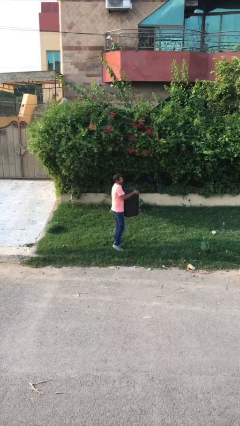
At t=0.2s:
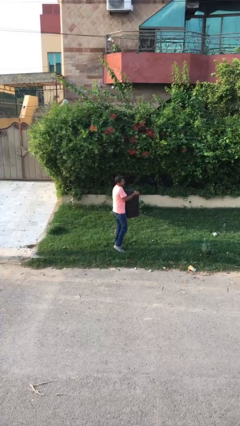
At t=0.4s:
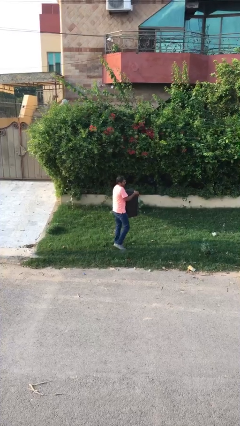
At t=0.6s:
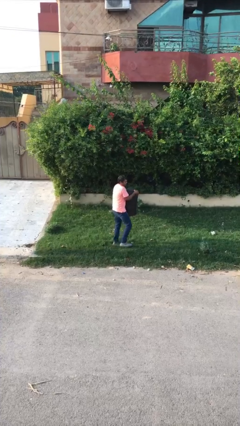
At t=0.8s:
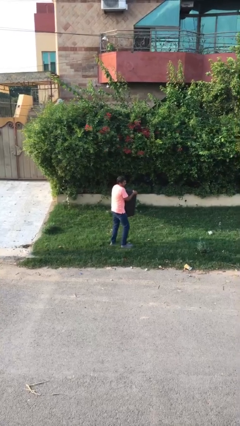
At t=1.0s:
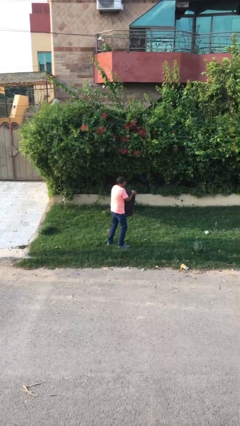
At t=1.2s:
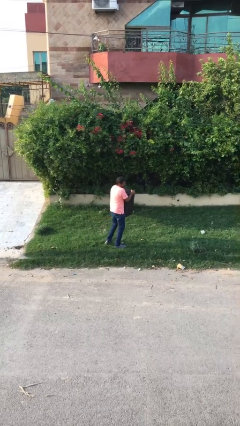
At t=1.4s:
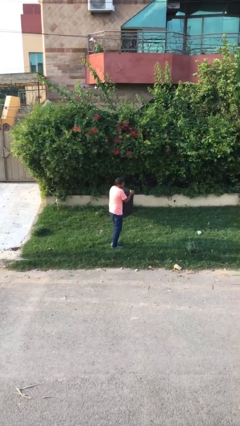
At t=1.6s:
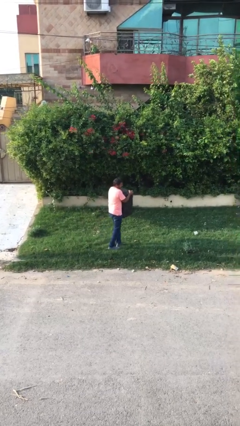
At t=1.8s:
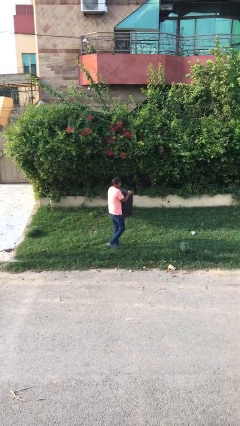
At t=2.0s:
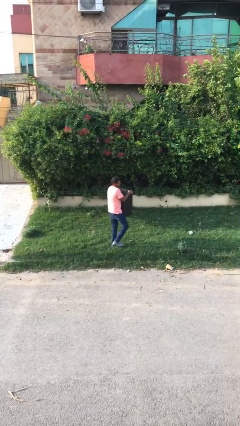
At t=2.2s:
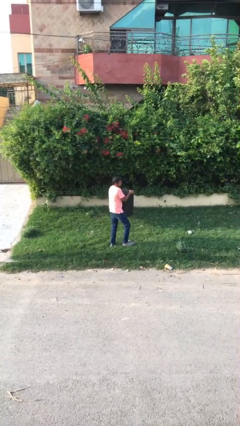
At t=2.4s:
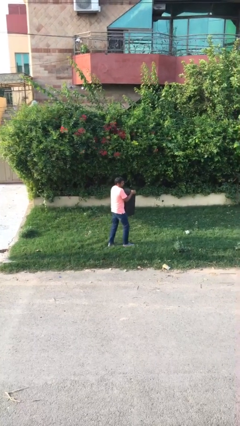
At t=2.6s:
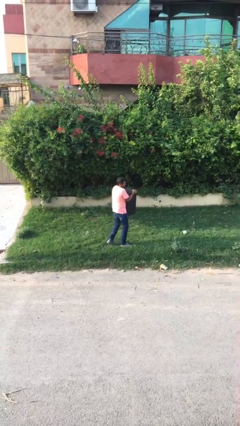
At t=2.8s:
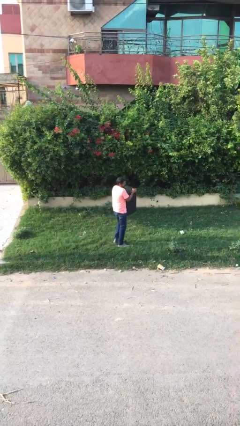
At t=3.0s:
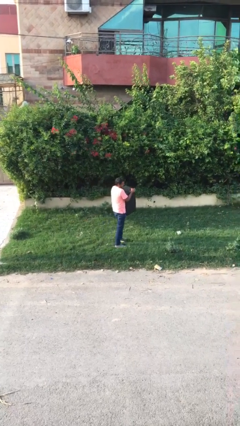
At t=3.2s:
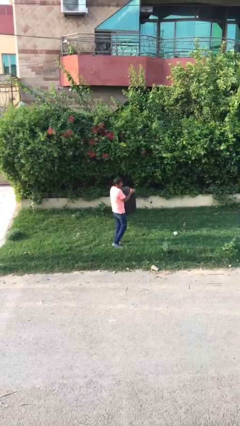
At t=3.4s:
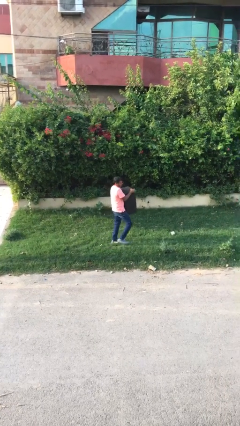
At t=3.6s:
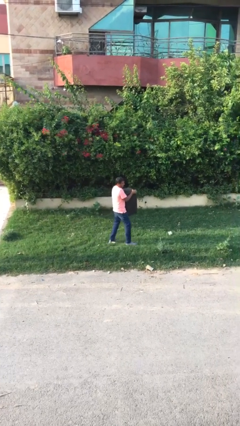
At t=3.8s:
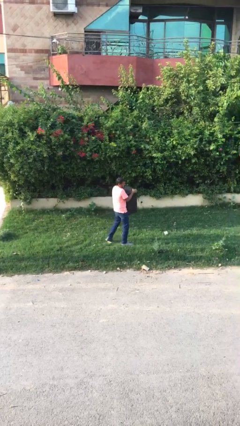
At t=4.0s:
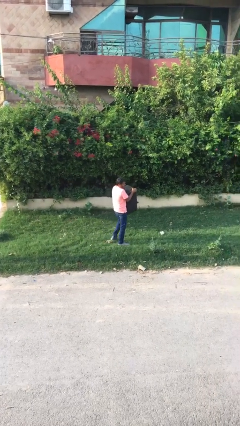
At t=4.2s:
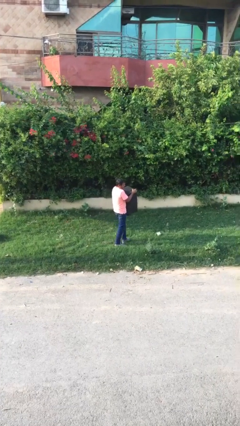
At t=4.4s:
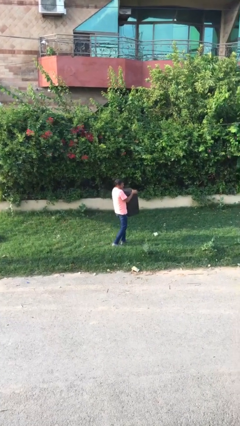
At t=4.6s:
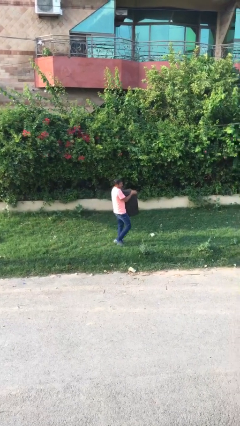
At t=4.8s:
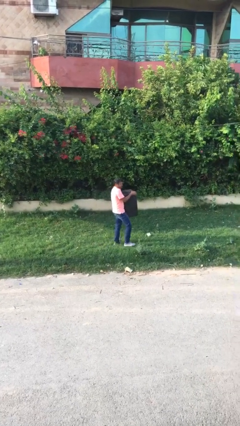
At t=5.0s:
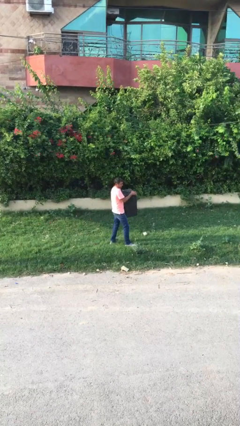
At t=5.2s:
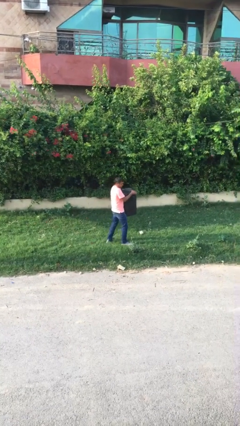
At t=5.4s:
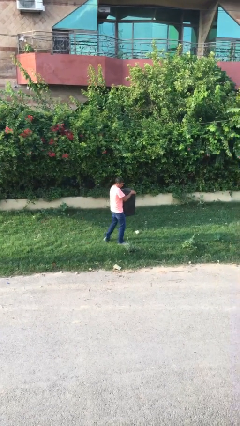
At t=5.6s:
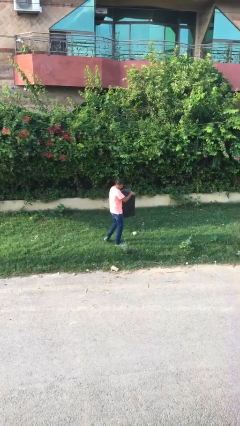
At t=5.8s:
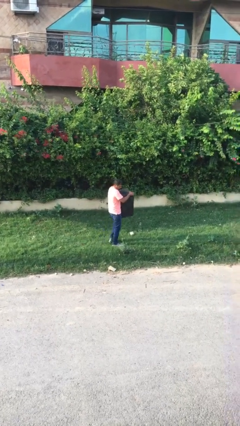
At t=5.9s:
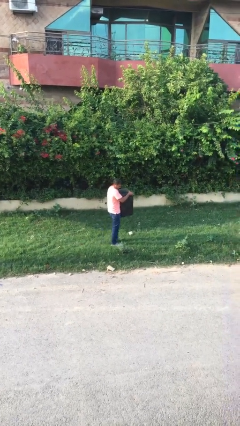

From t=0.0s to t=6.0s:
person carries heavy object

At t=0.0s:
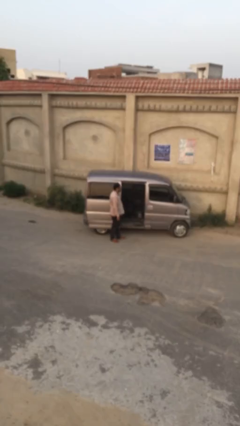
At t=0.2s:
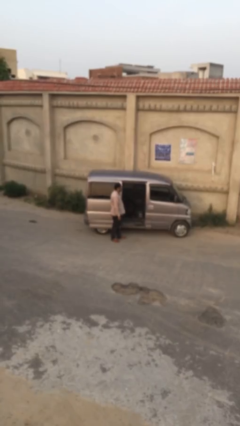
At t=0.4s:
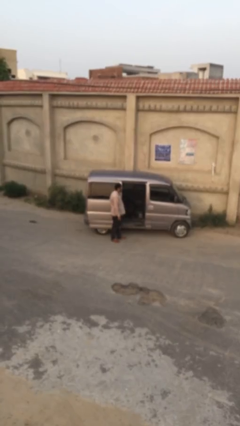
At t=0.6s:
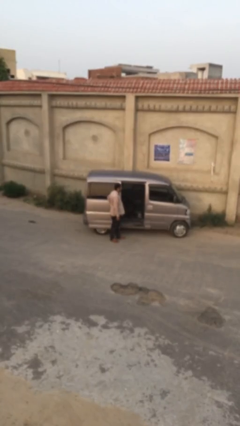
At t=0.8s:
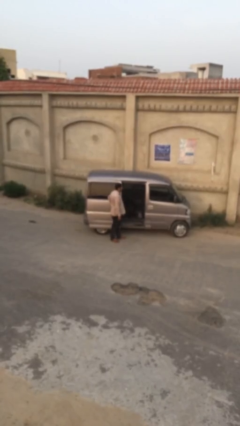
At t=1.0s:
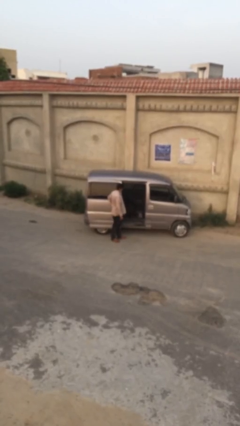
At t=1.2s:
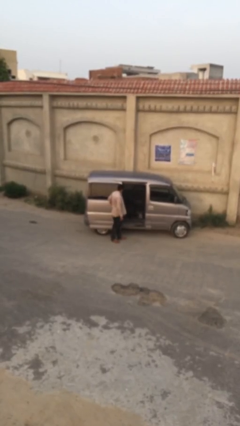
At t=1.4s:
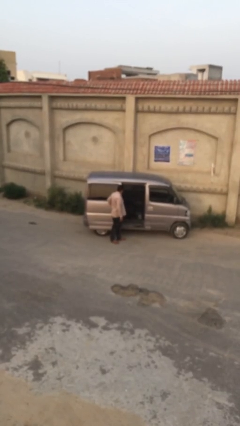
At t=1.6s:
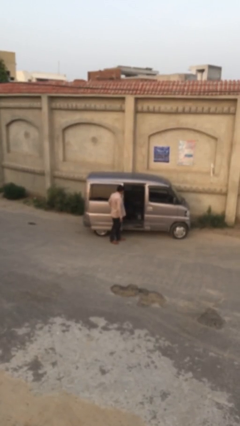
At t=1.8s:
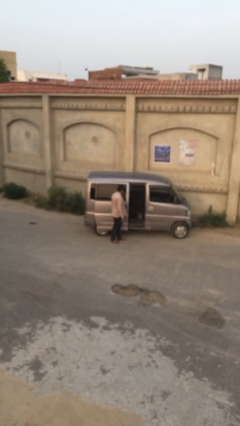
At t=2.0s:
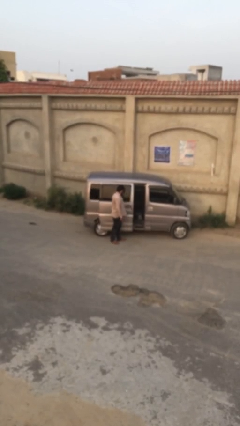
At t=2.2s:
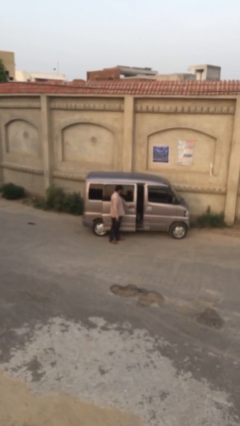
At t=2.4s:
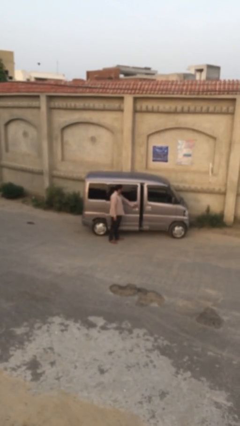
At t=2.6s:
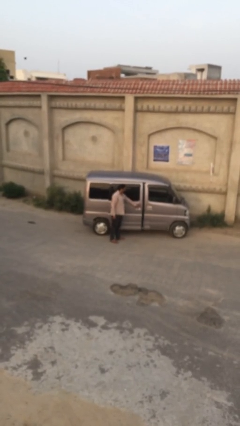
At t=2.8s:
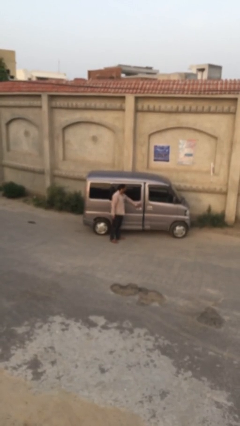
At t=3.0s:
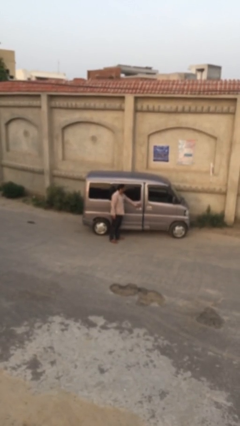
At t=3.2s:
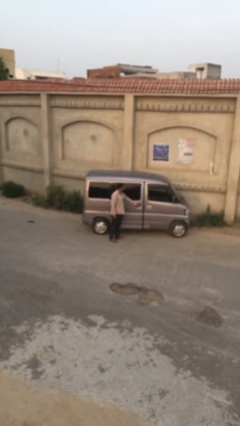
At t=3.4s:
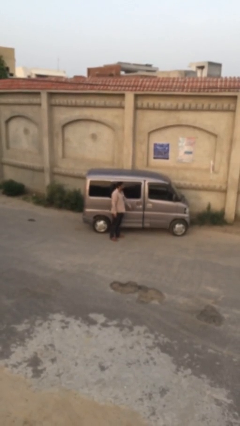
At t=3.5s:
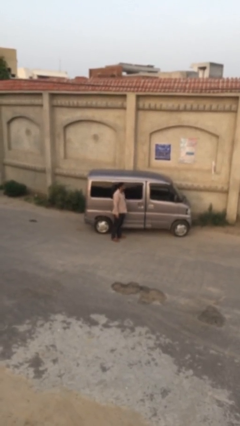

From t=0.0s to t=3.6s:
person closes car door

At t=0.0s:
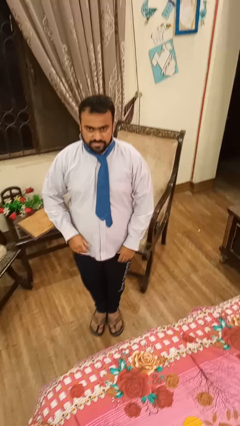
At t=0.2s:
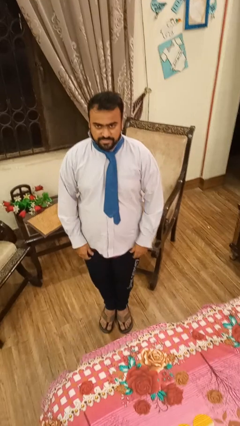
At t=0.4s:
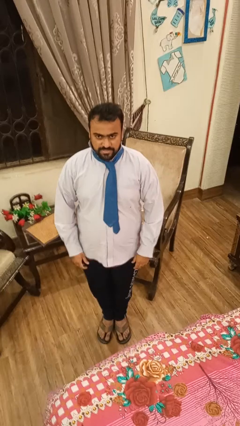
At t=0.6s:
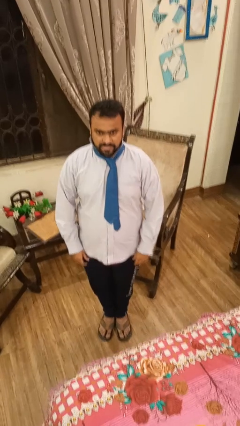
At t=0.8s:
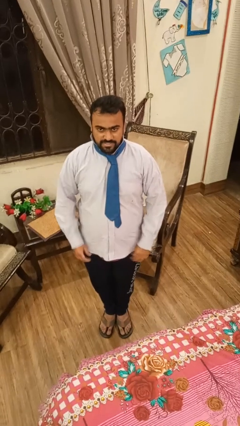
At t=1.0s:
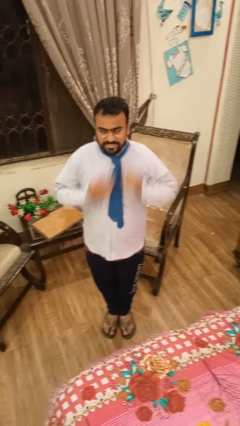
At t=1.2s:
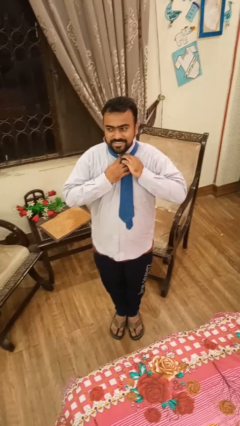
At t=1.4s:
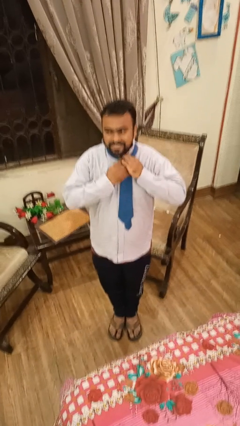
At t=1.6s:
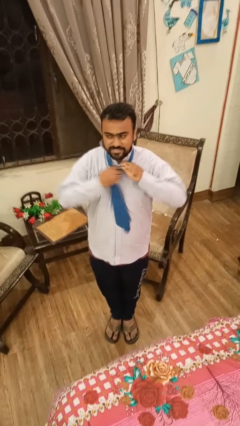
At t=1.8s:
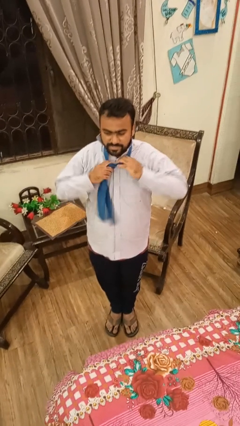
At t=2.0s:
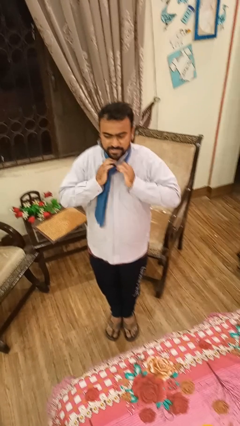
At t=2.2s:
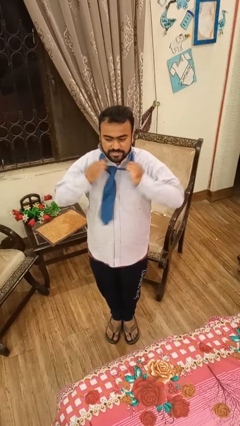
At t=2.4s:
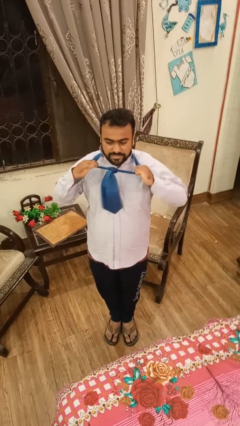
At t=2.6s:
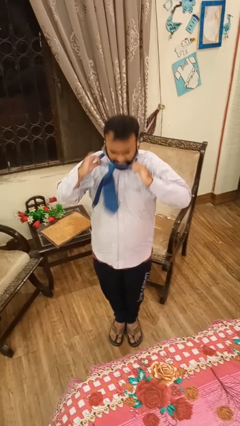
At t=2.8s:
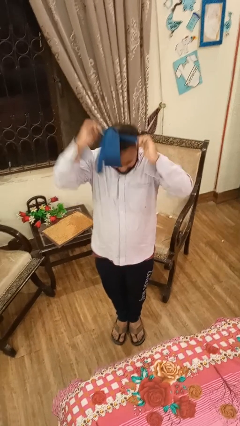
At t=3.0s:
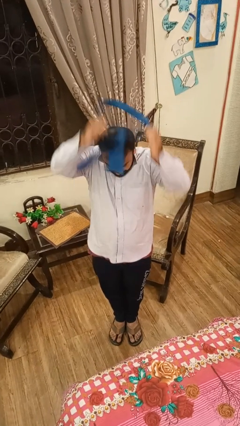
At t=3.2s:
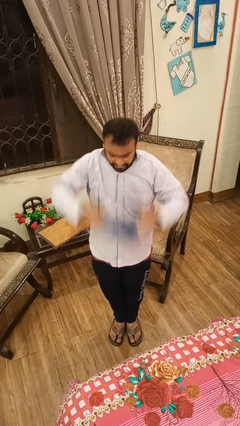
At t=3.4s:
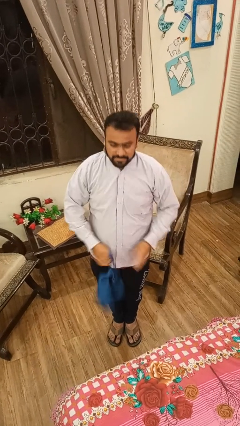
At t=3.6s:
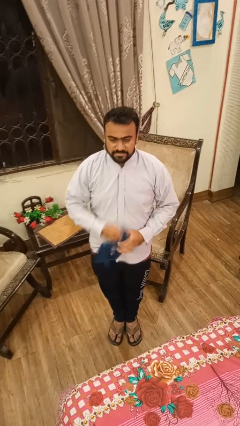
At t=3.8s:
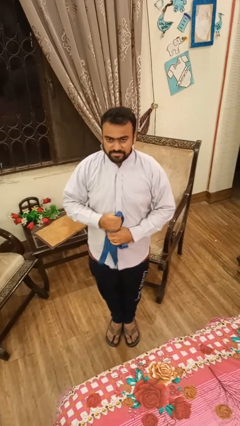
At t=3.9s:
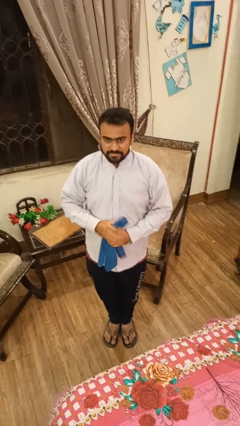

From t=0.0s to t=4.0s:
person takes off necktie

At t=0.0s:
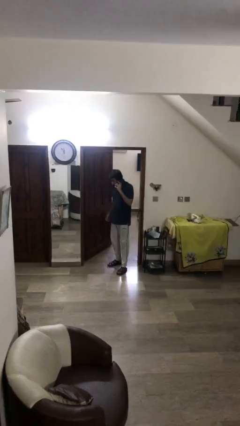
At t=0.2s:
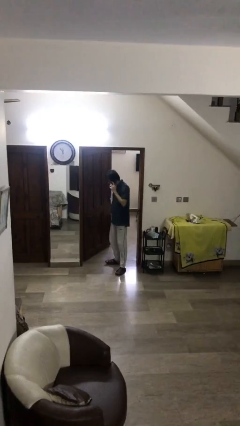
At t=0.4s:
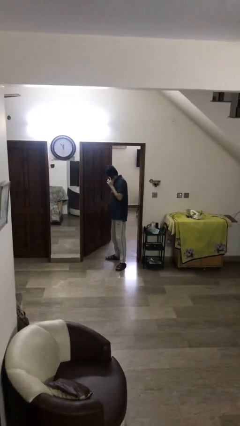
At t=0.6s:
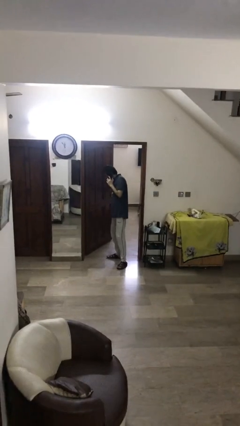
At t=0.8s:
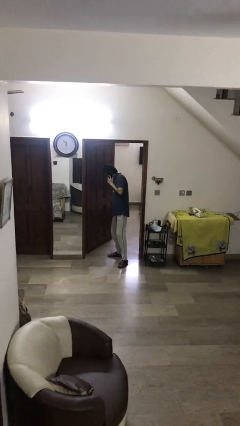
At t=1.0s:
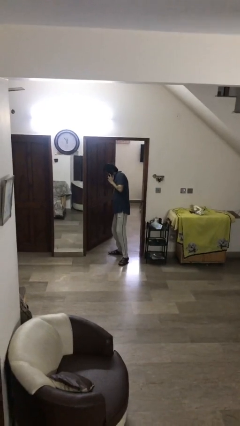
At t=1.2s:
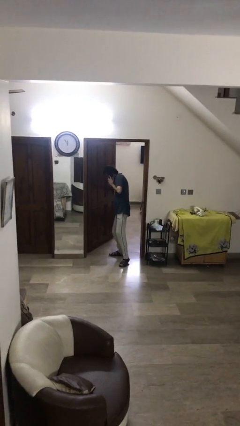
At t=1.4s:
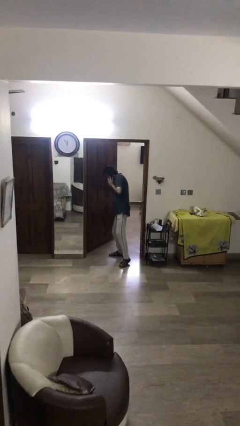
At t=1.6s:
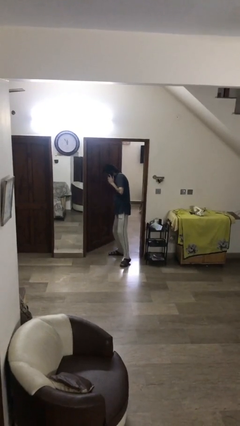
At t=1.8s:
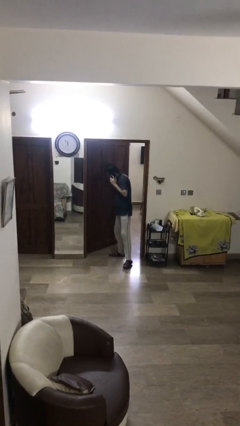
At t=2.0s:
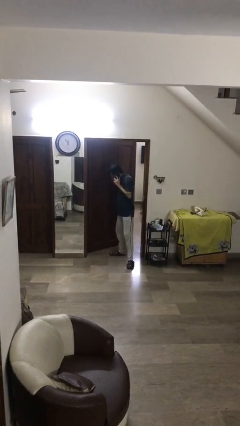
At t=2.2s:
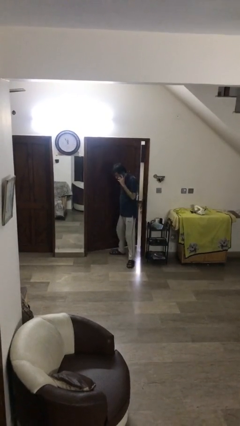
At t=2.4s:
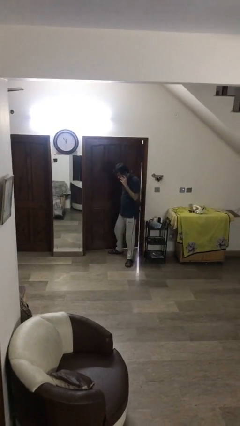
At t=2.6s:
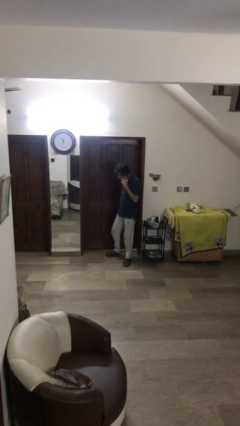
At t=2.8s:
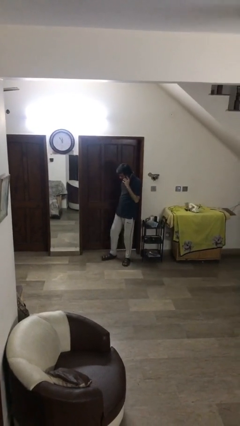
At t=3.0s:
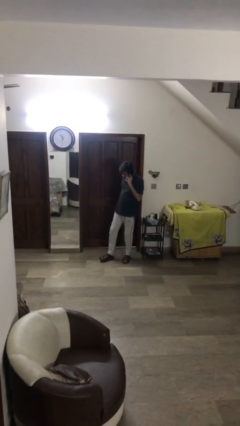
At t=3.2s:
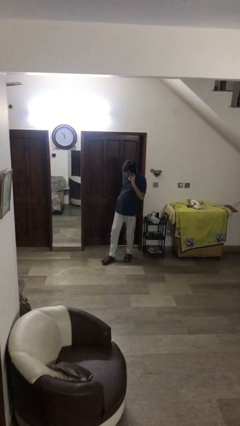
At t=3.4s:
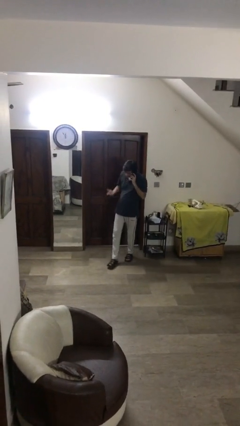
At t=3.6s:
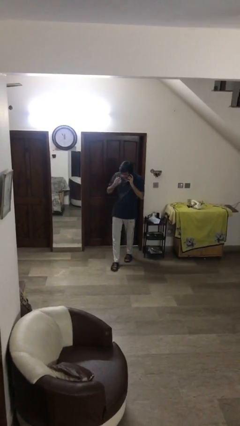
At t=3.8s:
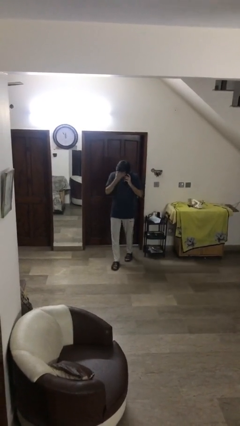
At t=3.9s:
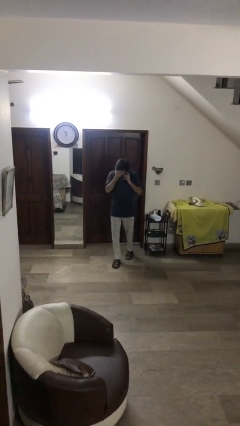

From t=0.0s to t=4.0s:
person closes facility door
